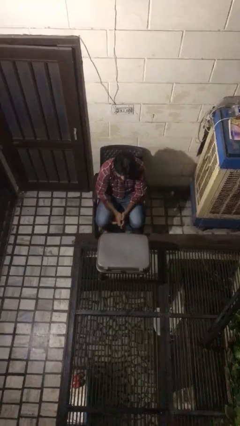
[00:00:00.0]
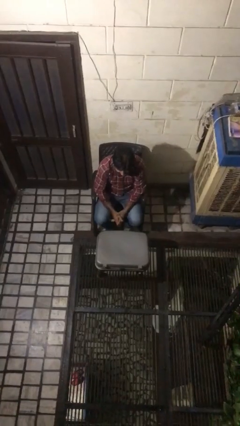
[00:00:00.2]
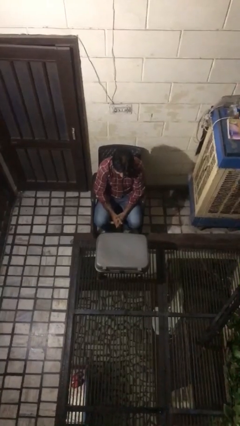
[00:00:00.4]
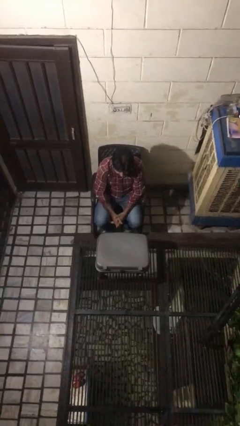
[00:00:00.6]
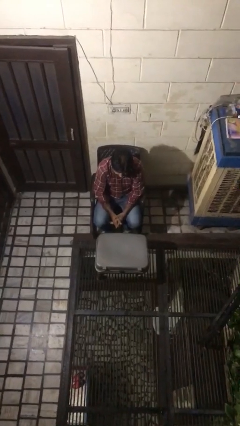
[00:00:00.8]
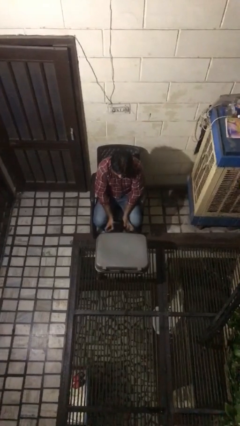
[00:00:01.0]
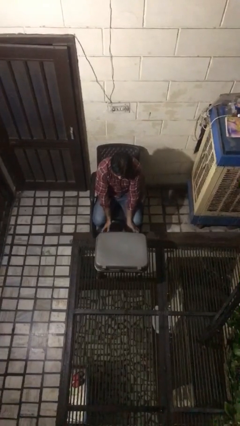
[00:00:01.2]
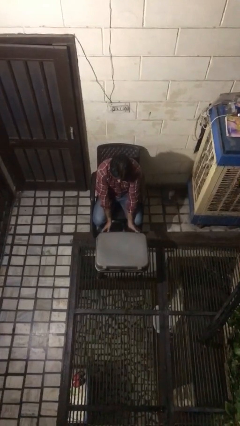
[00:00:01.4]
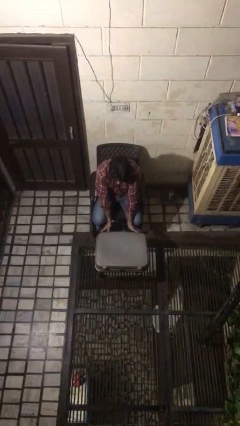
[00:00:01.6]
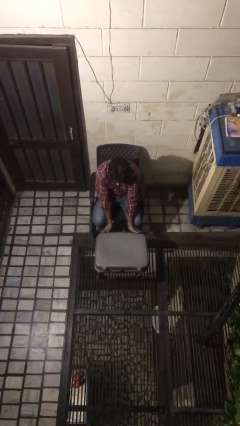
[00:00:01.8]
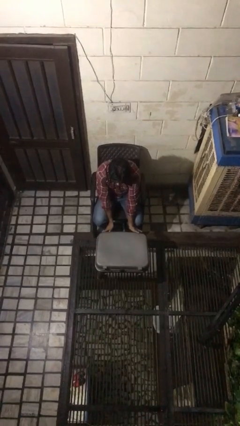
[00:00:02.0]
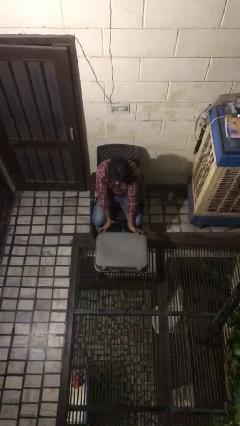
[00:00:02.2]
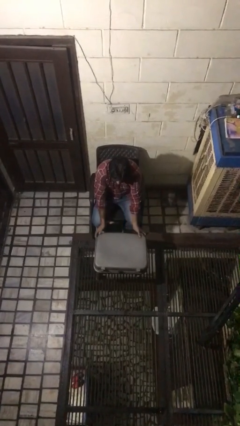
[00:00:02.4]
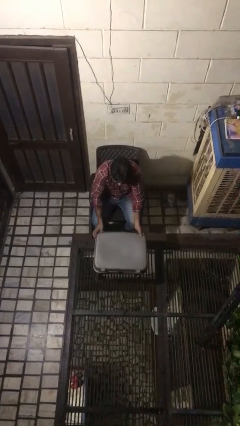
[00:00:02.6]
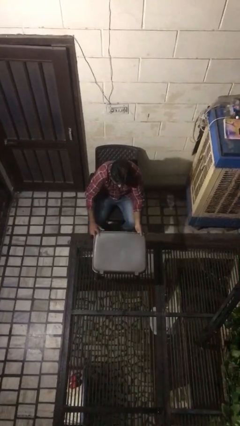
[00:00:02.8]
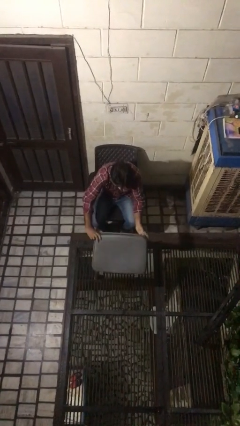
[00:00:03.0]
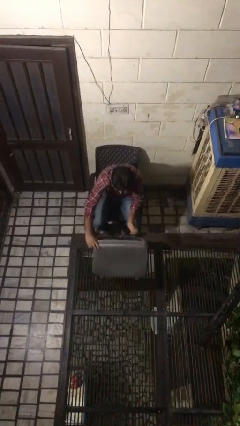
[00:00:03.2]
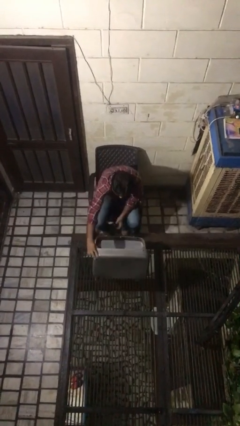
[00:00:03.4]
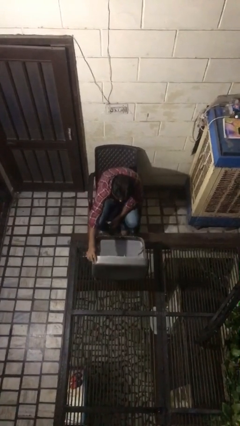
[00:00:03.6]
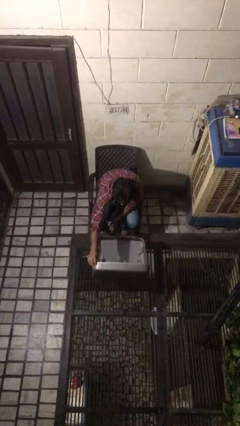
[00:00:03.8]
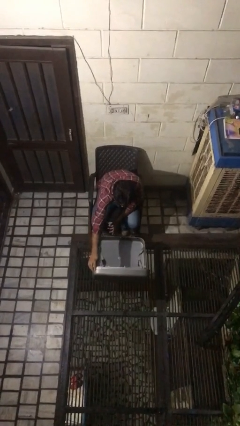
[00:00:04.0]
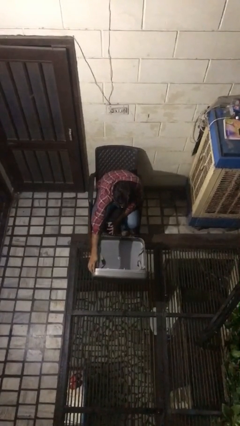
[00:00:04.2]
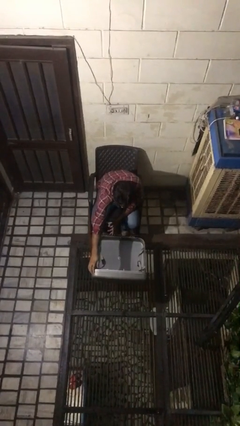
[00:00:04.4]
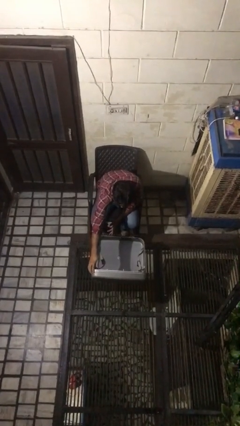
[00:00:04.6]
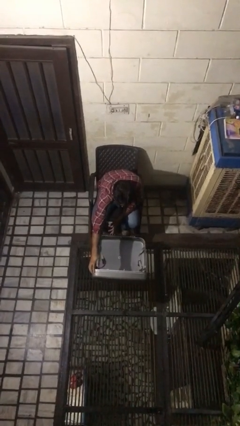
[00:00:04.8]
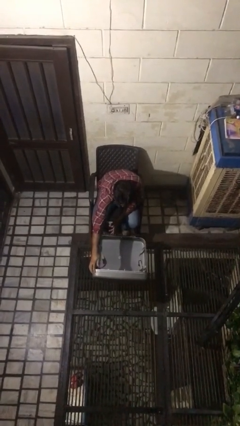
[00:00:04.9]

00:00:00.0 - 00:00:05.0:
person opens suitcase

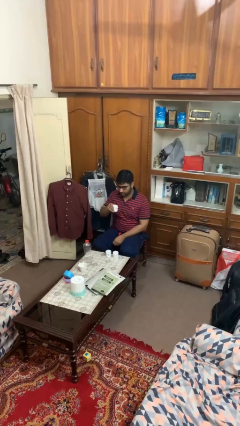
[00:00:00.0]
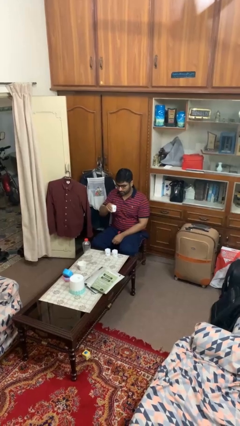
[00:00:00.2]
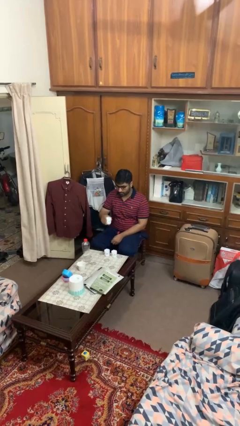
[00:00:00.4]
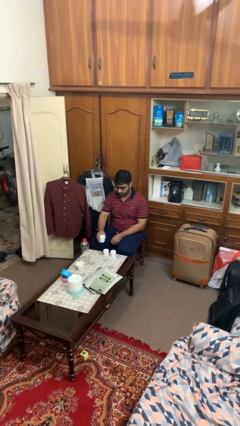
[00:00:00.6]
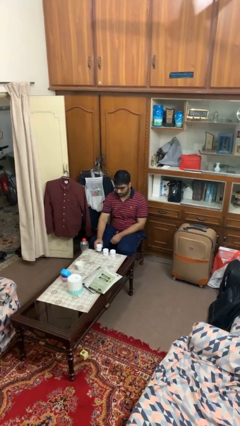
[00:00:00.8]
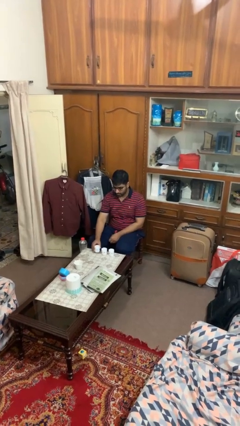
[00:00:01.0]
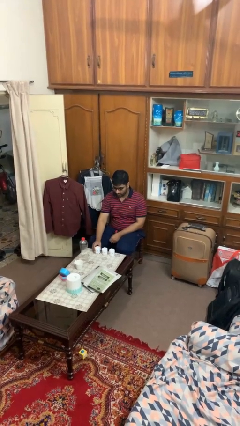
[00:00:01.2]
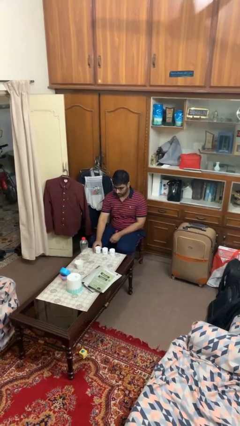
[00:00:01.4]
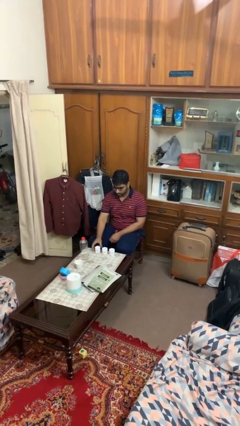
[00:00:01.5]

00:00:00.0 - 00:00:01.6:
person puts down object on table

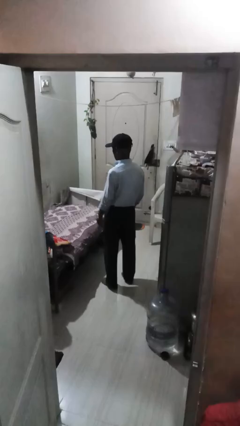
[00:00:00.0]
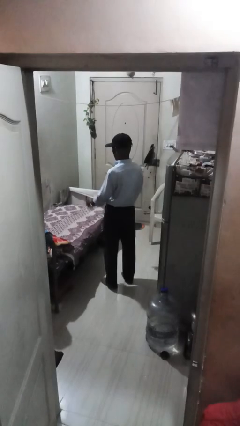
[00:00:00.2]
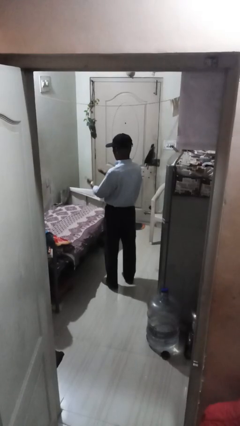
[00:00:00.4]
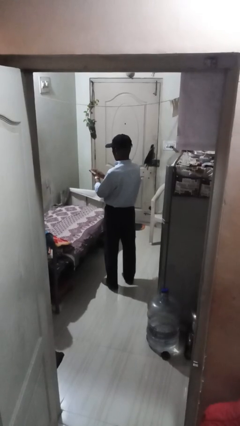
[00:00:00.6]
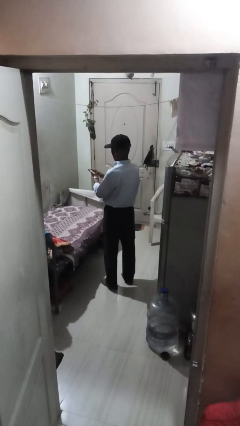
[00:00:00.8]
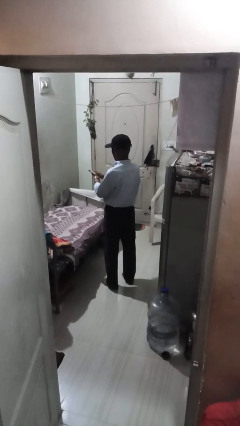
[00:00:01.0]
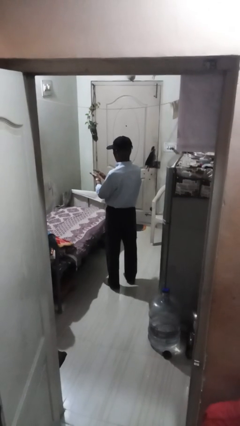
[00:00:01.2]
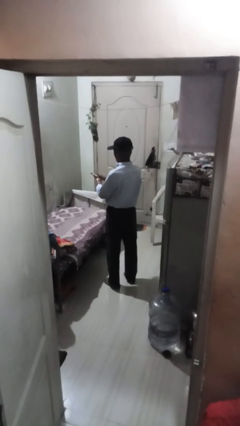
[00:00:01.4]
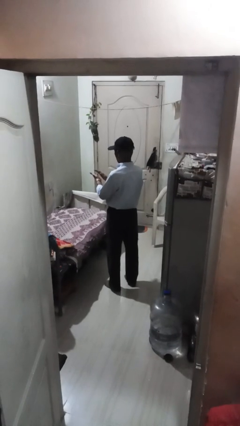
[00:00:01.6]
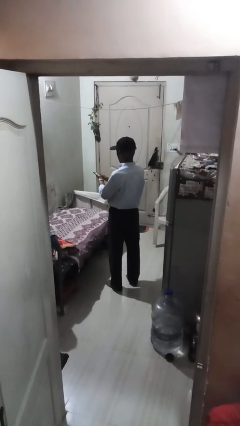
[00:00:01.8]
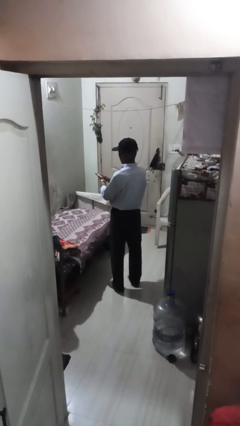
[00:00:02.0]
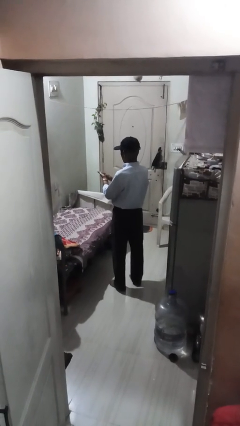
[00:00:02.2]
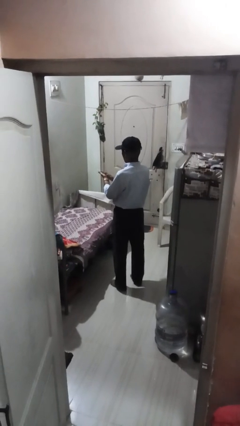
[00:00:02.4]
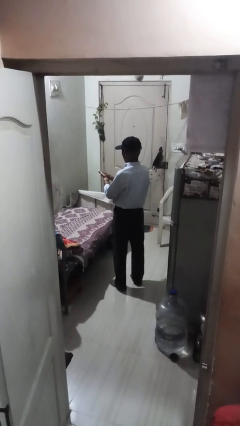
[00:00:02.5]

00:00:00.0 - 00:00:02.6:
person claps hands

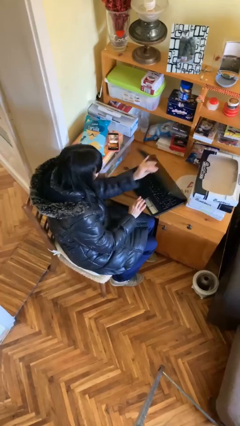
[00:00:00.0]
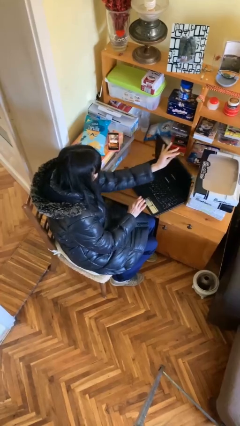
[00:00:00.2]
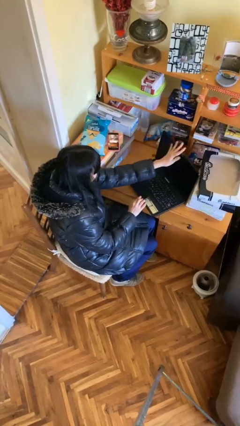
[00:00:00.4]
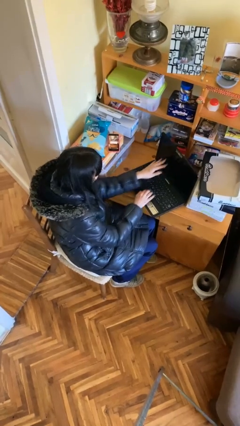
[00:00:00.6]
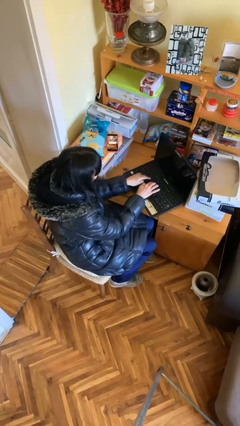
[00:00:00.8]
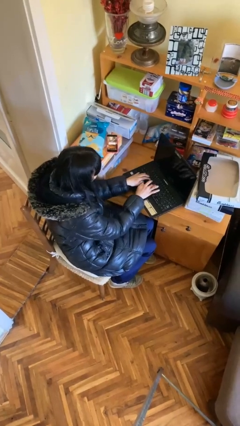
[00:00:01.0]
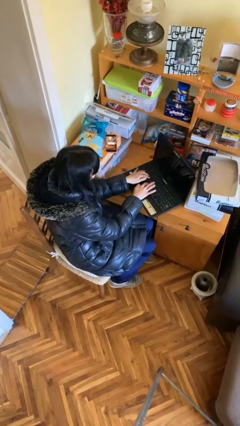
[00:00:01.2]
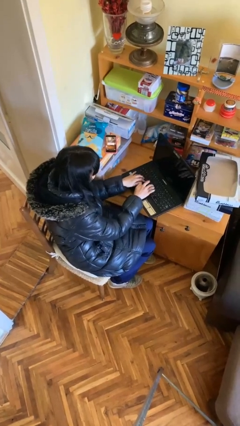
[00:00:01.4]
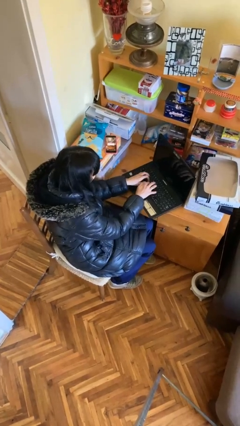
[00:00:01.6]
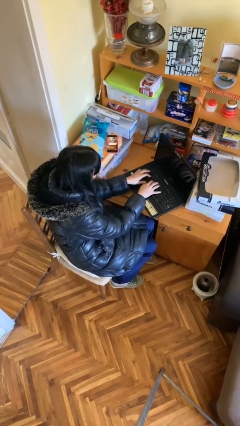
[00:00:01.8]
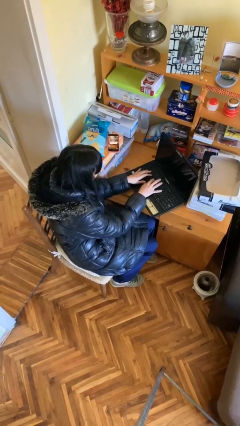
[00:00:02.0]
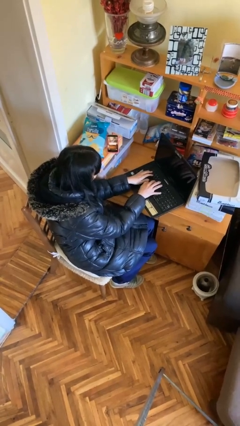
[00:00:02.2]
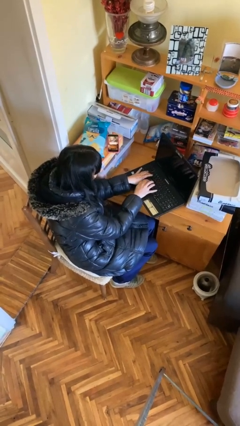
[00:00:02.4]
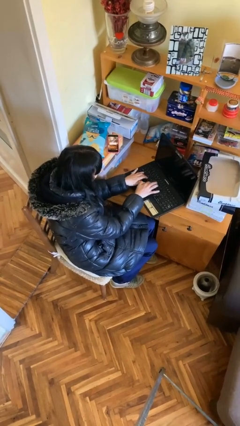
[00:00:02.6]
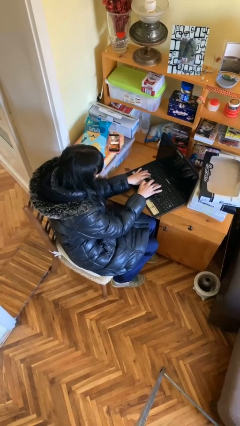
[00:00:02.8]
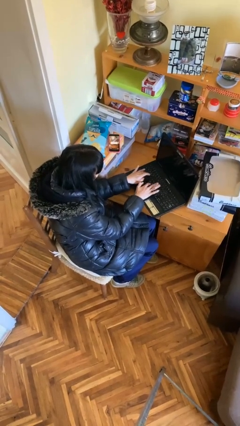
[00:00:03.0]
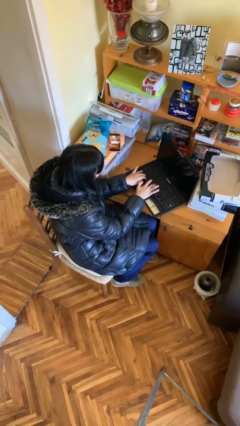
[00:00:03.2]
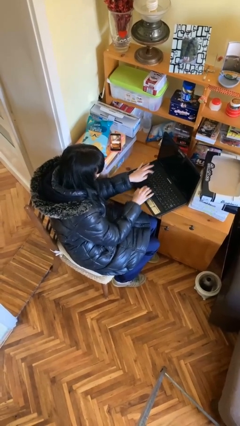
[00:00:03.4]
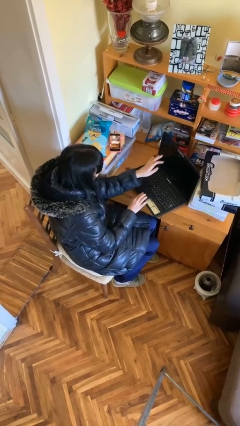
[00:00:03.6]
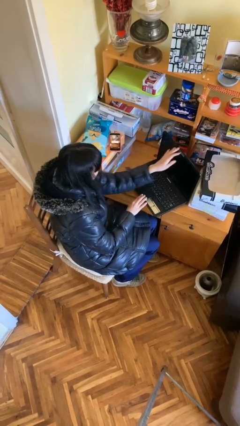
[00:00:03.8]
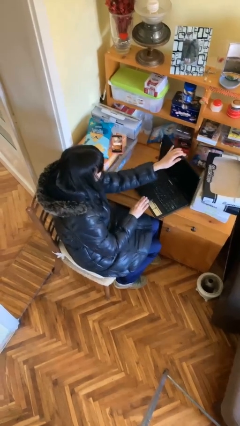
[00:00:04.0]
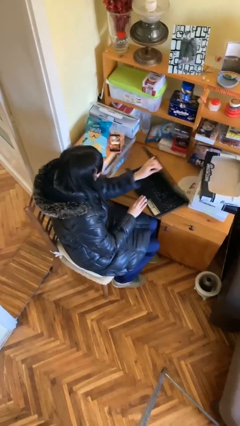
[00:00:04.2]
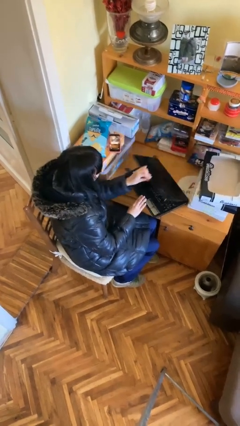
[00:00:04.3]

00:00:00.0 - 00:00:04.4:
person interacts with laptop

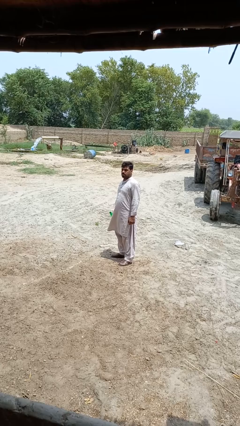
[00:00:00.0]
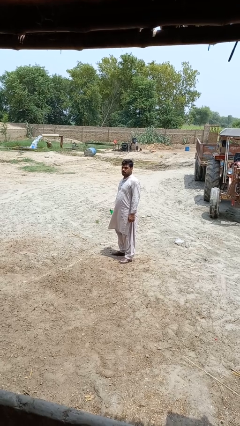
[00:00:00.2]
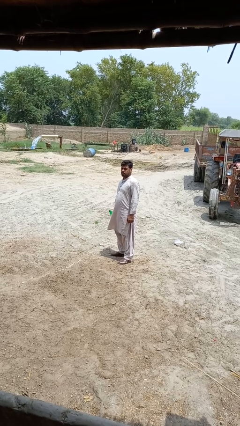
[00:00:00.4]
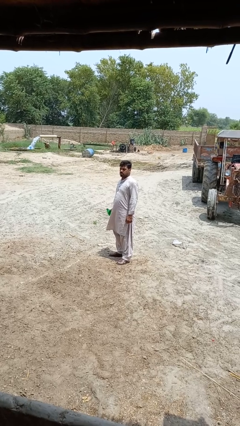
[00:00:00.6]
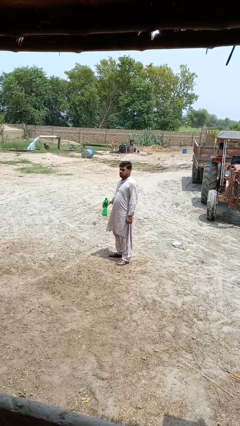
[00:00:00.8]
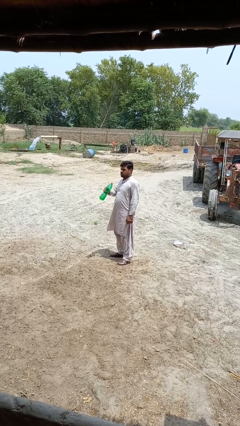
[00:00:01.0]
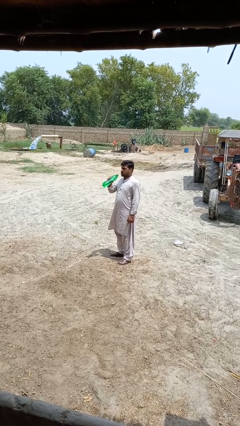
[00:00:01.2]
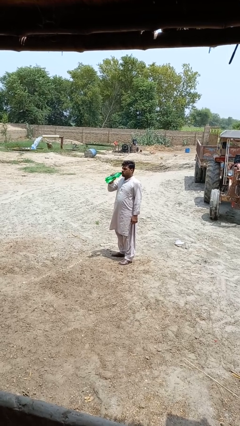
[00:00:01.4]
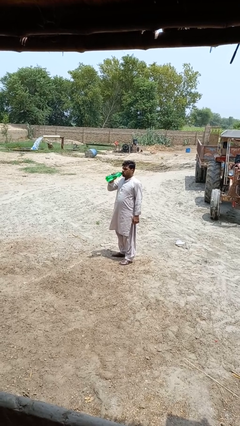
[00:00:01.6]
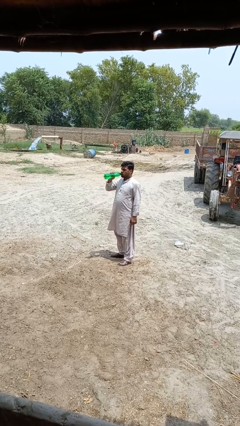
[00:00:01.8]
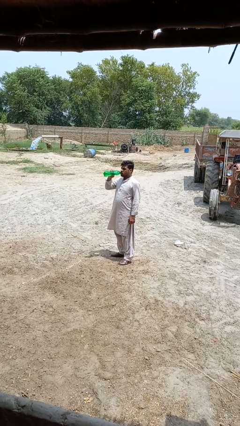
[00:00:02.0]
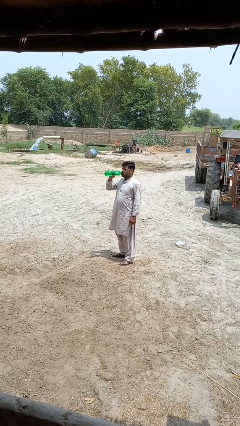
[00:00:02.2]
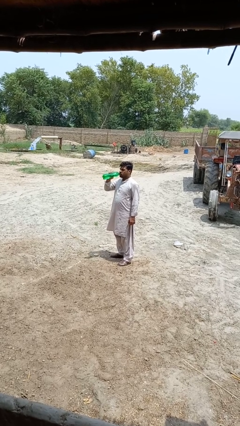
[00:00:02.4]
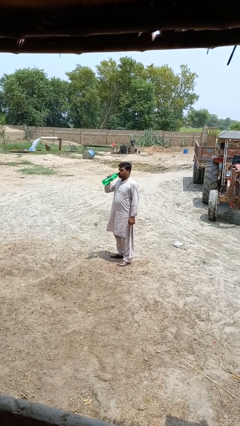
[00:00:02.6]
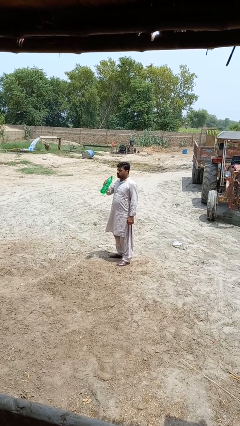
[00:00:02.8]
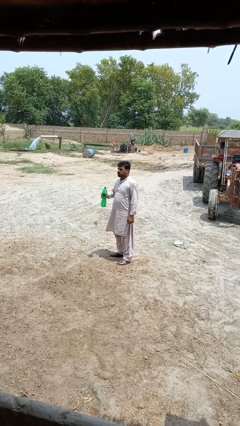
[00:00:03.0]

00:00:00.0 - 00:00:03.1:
person drinks from bottle

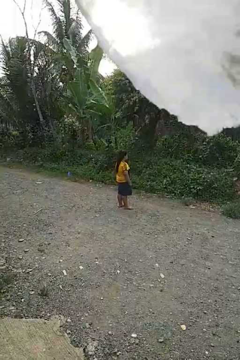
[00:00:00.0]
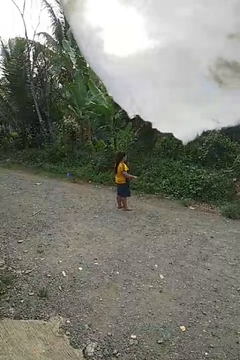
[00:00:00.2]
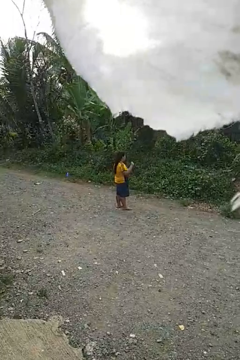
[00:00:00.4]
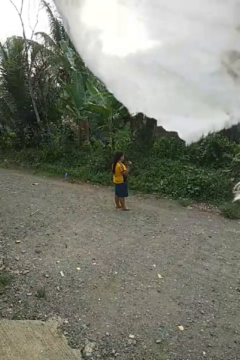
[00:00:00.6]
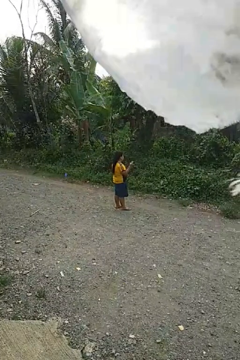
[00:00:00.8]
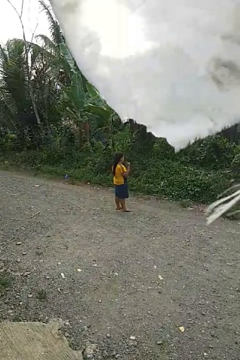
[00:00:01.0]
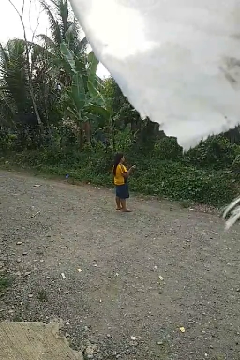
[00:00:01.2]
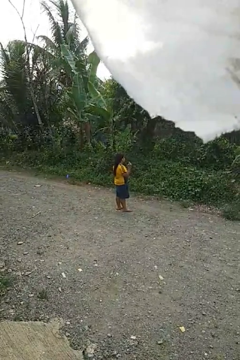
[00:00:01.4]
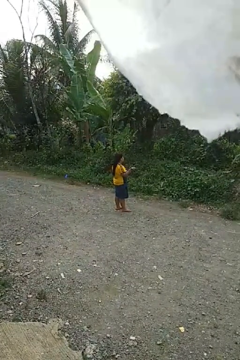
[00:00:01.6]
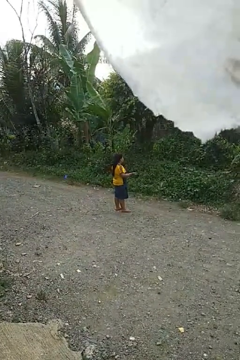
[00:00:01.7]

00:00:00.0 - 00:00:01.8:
person snaps fingers
